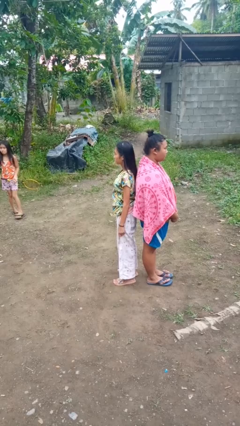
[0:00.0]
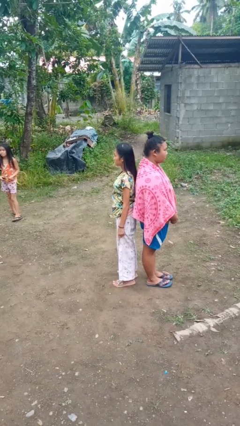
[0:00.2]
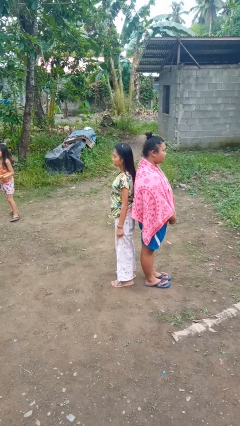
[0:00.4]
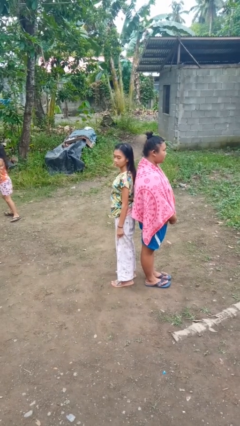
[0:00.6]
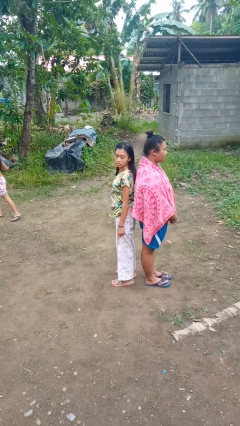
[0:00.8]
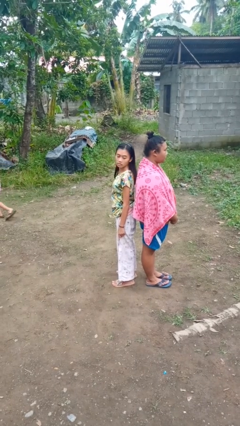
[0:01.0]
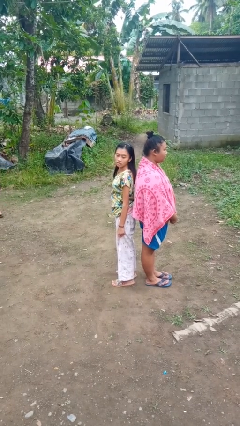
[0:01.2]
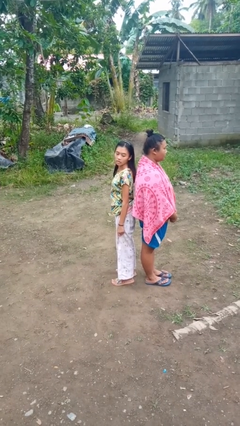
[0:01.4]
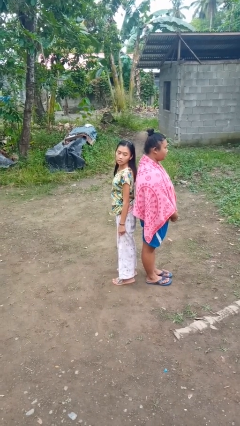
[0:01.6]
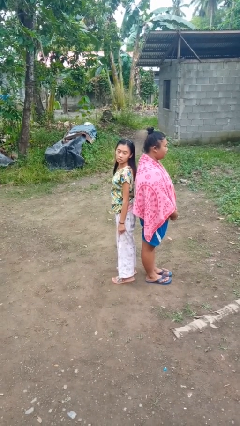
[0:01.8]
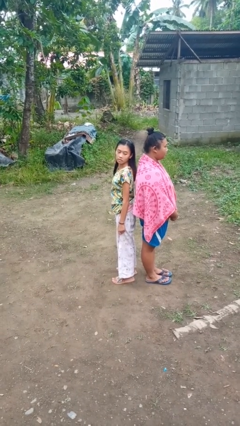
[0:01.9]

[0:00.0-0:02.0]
person looks over shoulder

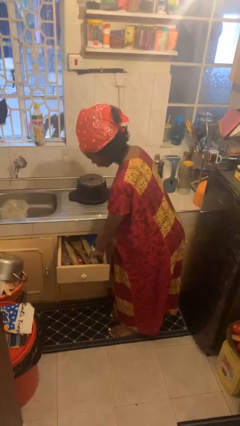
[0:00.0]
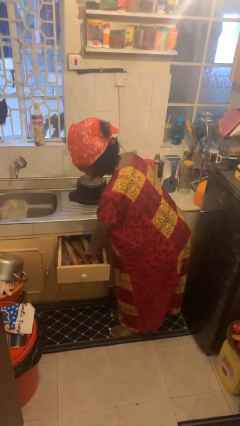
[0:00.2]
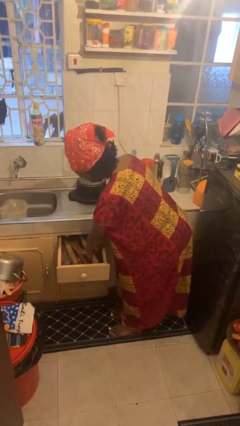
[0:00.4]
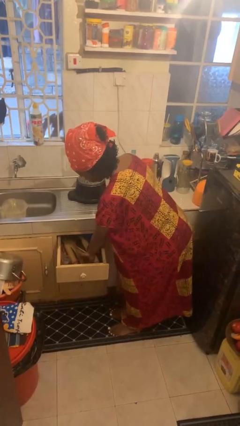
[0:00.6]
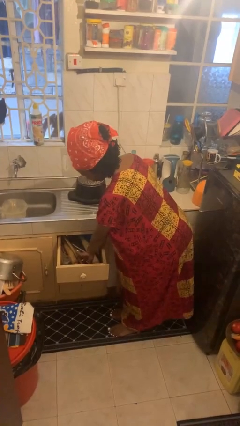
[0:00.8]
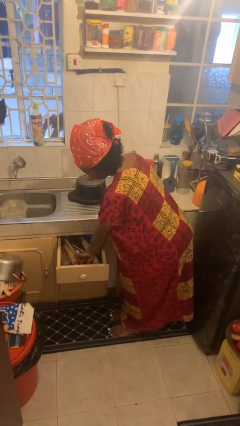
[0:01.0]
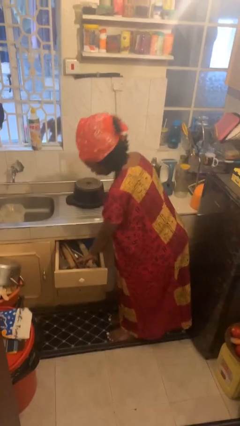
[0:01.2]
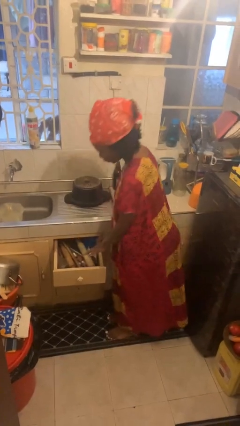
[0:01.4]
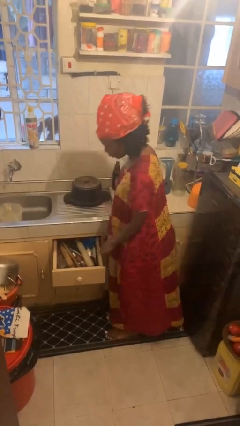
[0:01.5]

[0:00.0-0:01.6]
person searches in kitchen drawer

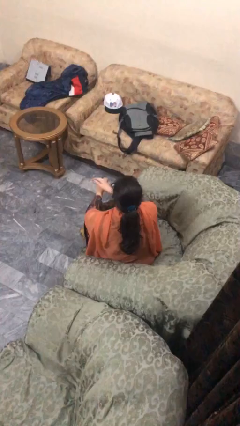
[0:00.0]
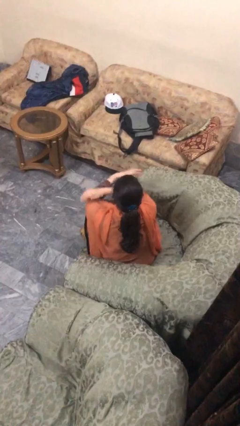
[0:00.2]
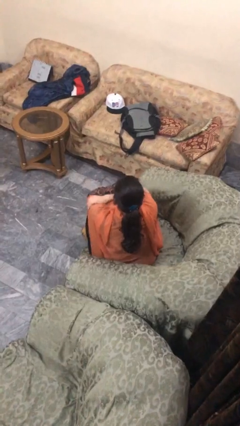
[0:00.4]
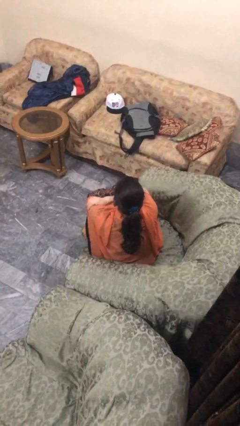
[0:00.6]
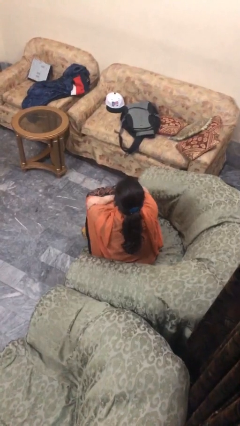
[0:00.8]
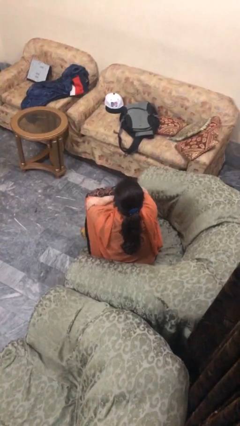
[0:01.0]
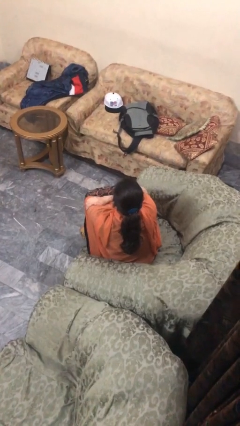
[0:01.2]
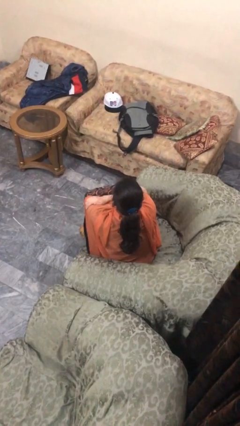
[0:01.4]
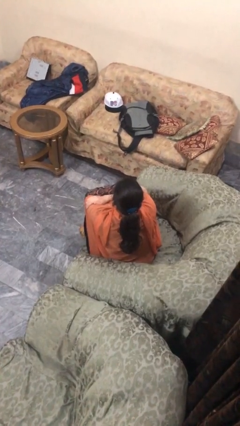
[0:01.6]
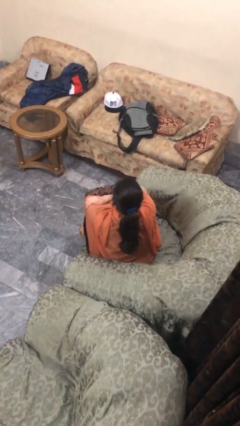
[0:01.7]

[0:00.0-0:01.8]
person crosses arms

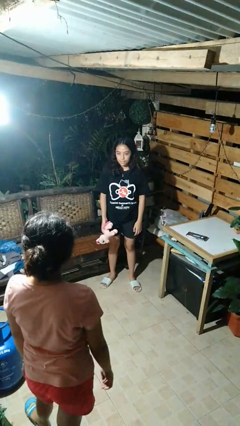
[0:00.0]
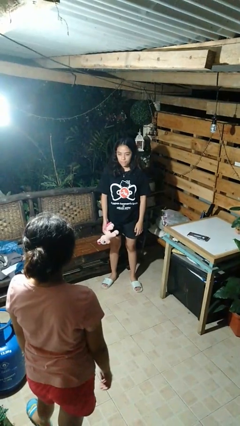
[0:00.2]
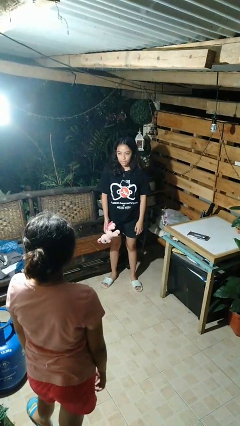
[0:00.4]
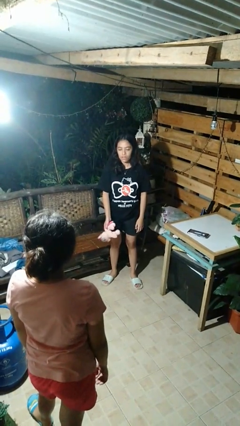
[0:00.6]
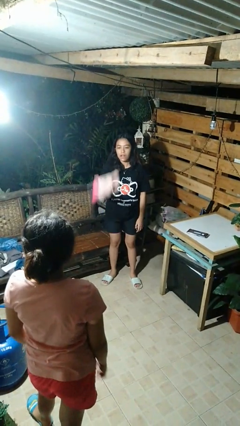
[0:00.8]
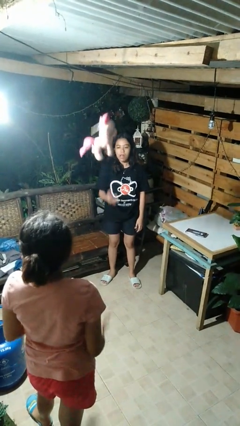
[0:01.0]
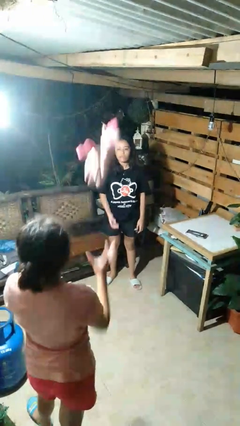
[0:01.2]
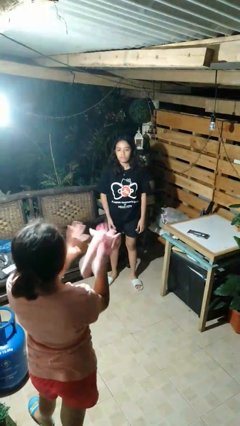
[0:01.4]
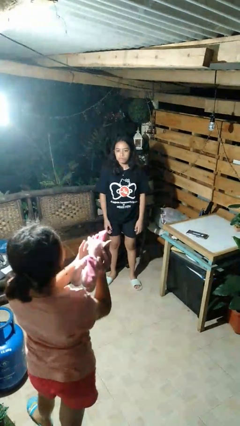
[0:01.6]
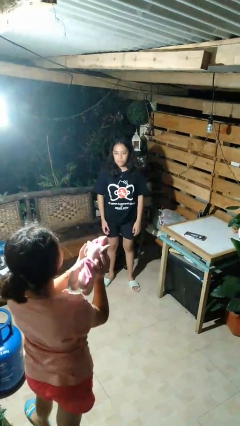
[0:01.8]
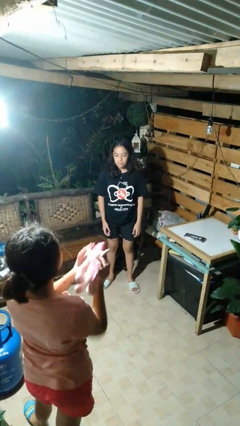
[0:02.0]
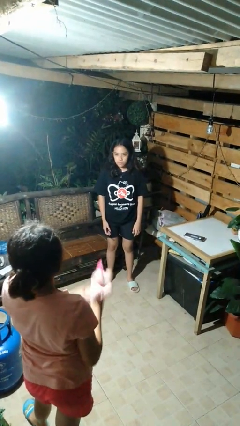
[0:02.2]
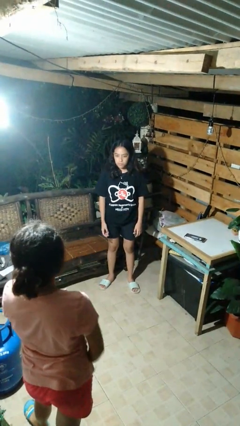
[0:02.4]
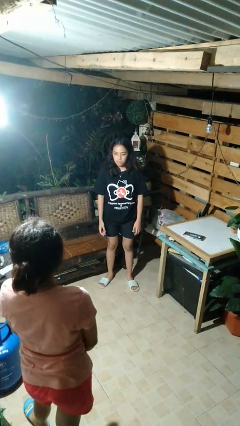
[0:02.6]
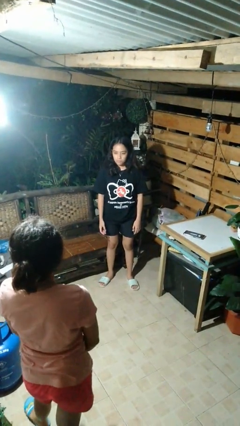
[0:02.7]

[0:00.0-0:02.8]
person throws object to person

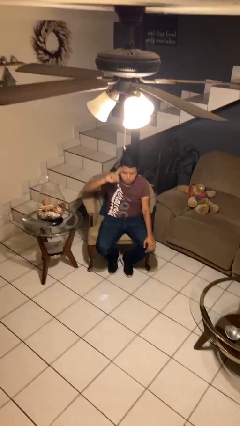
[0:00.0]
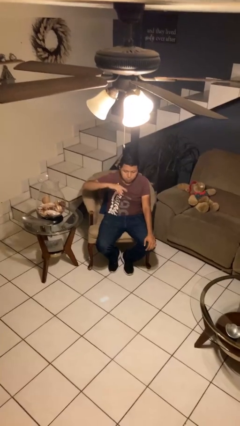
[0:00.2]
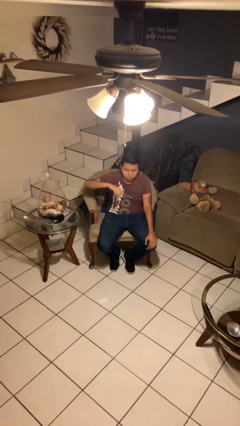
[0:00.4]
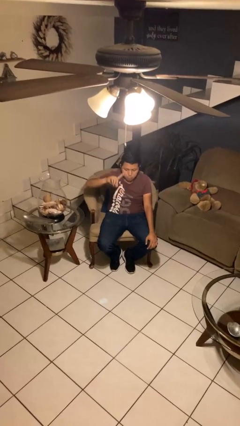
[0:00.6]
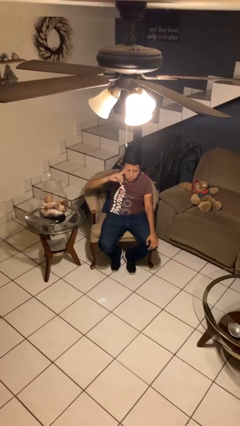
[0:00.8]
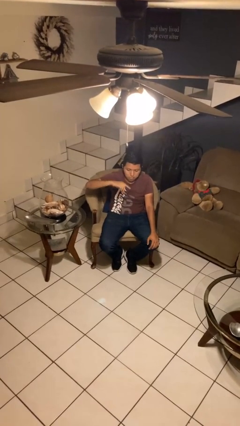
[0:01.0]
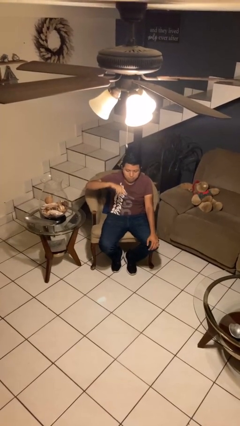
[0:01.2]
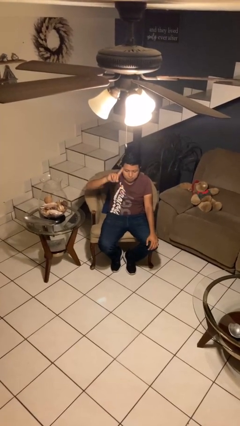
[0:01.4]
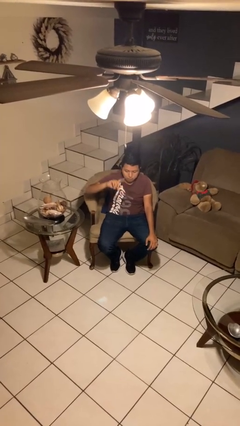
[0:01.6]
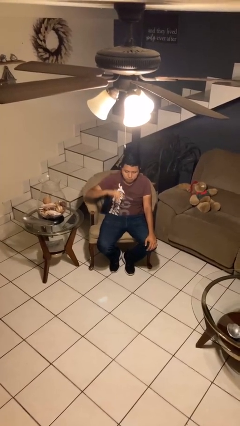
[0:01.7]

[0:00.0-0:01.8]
person gestures swipe down

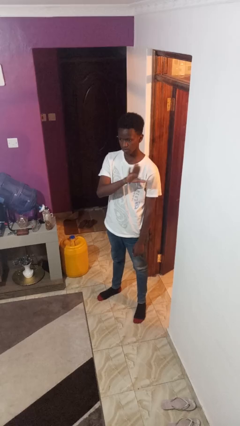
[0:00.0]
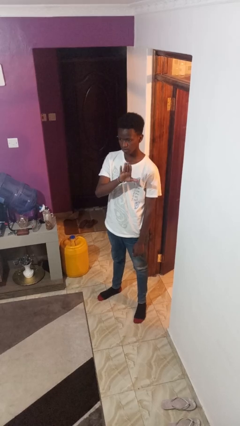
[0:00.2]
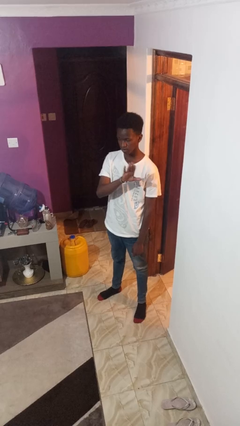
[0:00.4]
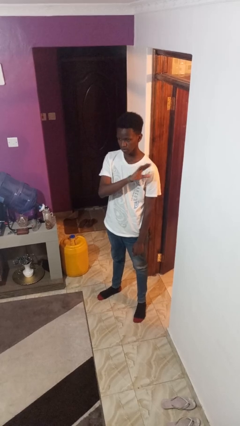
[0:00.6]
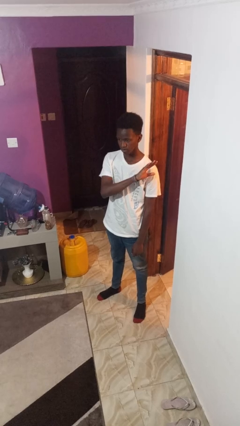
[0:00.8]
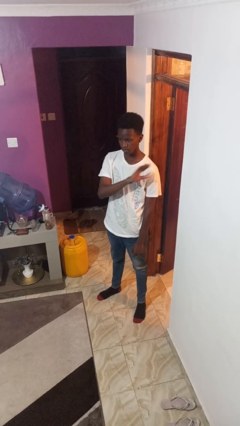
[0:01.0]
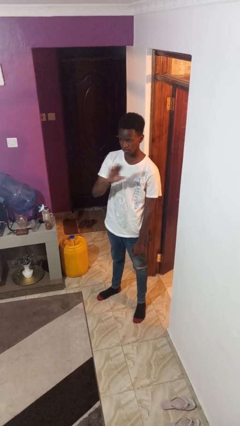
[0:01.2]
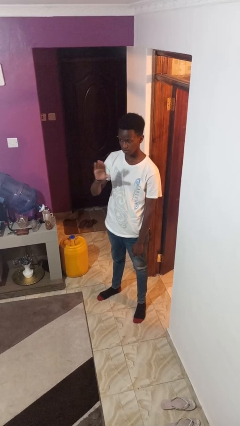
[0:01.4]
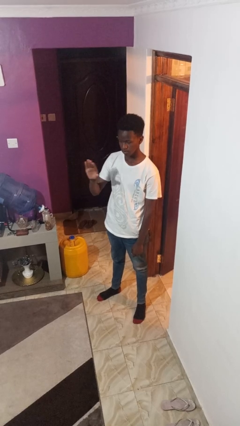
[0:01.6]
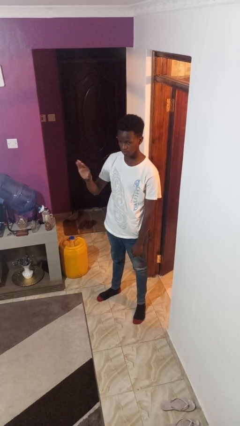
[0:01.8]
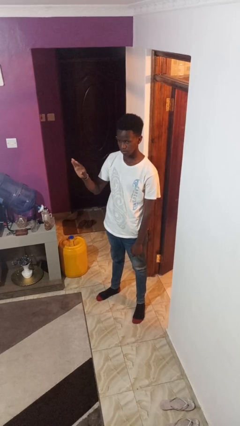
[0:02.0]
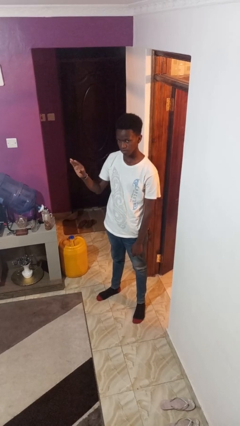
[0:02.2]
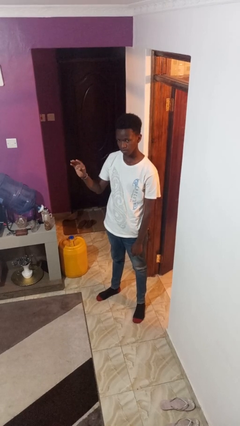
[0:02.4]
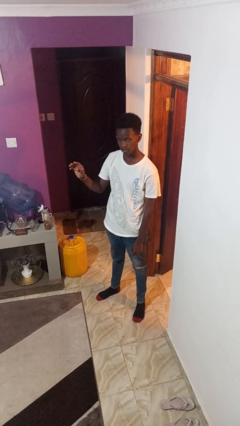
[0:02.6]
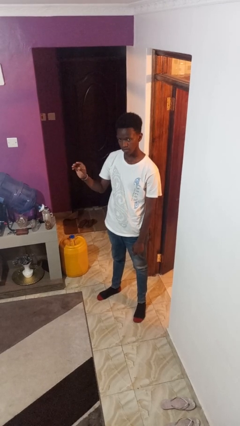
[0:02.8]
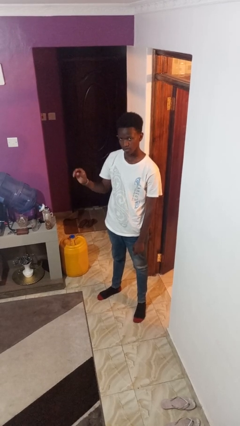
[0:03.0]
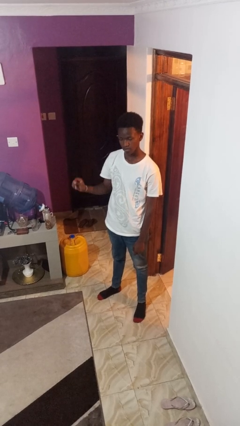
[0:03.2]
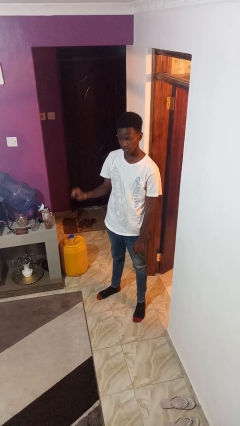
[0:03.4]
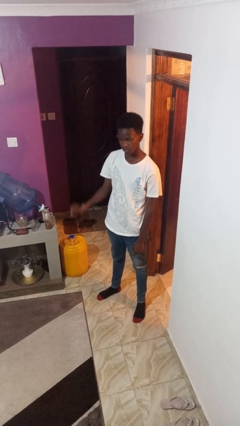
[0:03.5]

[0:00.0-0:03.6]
person gestures swipe right

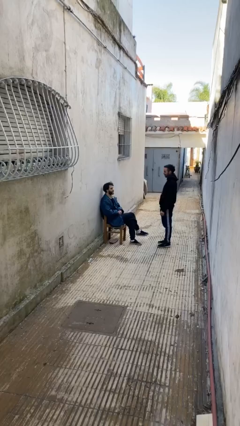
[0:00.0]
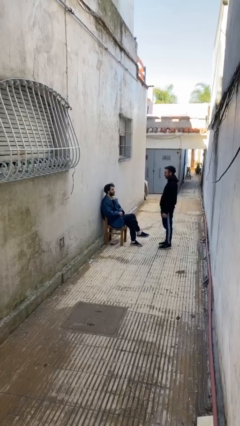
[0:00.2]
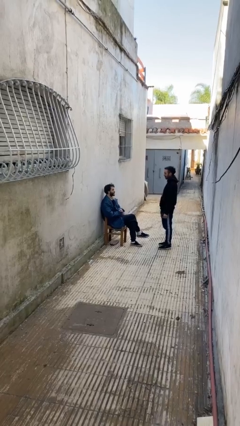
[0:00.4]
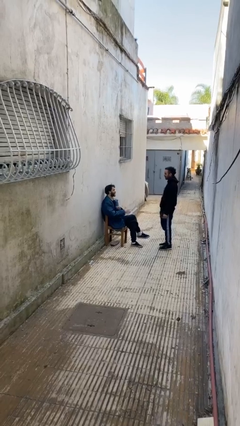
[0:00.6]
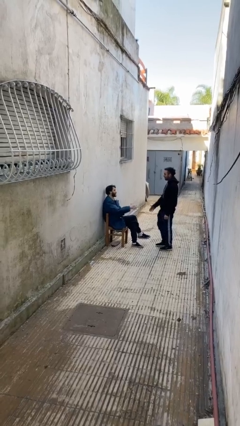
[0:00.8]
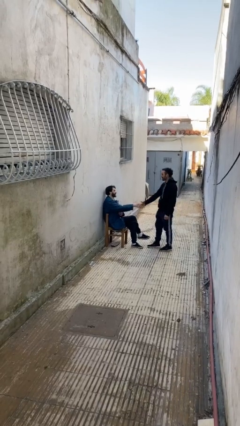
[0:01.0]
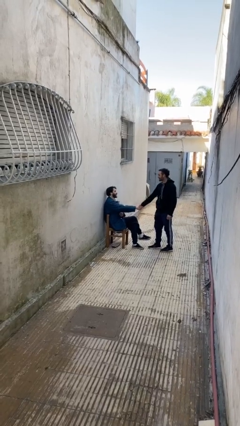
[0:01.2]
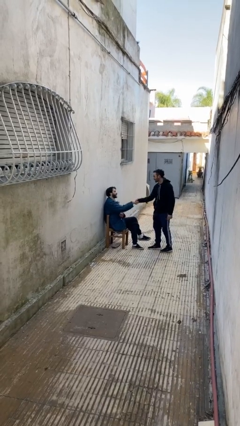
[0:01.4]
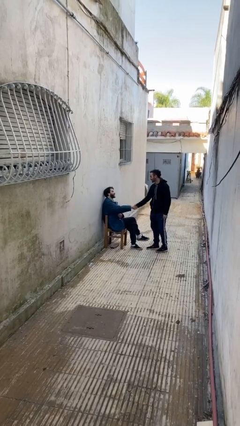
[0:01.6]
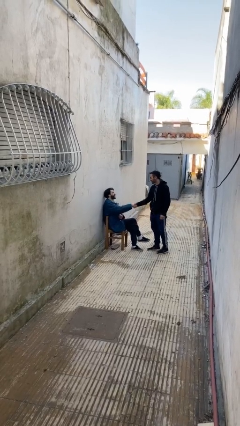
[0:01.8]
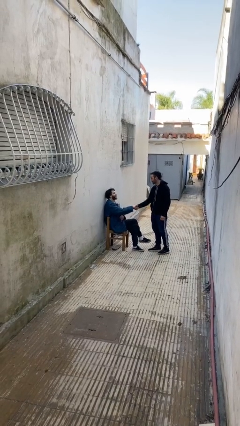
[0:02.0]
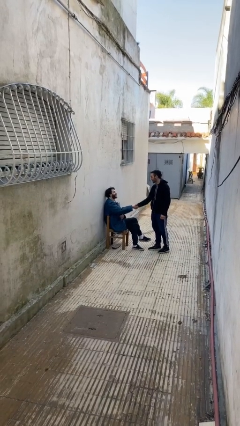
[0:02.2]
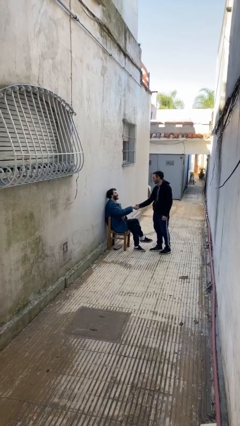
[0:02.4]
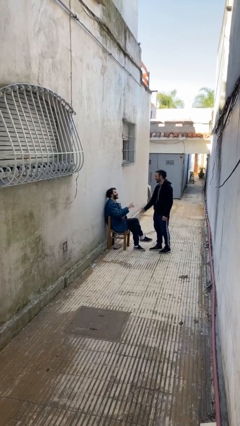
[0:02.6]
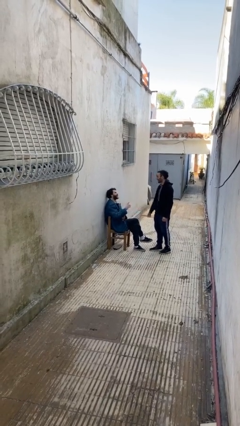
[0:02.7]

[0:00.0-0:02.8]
person shakes hand

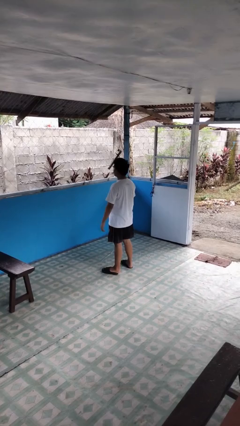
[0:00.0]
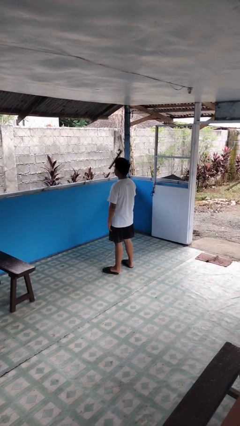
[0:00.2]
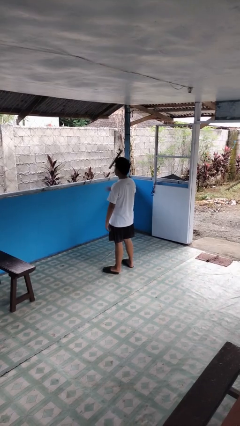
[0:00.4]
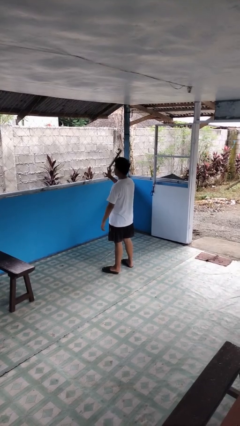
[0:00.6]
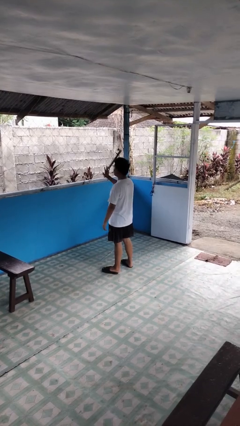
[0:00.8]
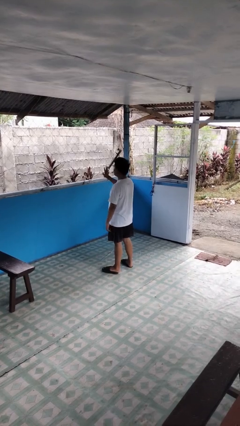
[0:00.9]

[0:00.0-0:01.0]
person gestures number five
